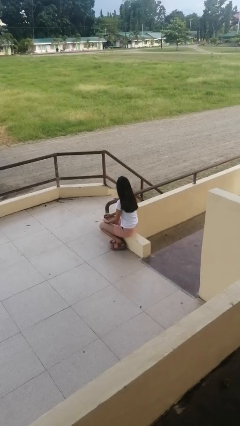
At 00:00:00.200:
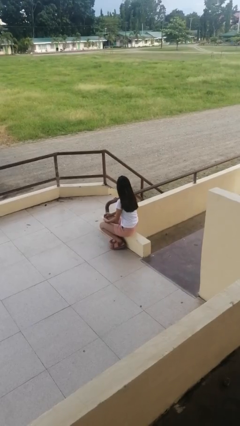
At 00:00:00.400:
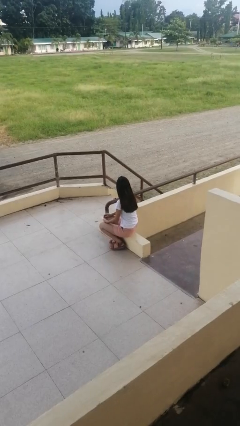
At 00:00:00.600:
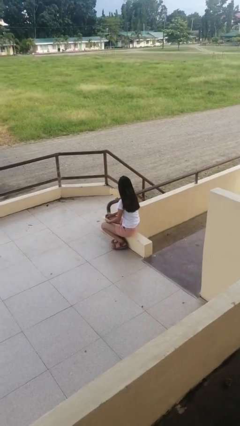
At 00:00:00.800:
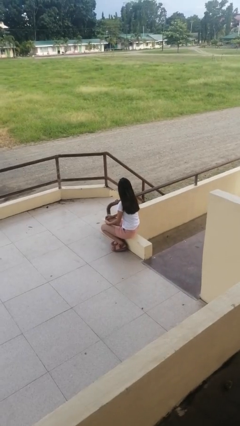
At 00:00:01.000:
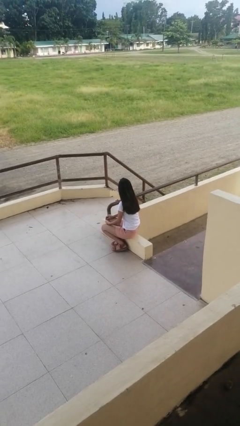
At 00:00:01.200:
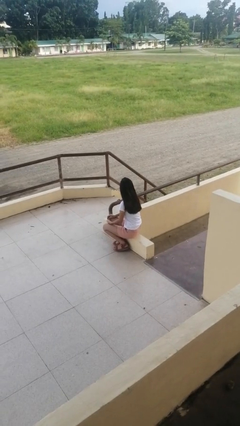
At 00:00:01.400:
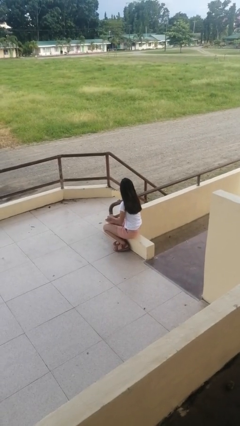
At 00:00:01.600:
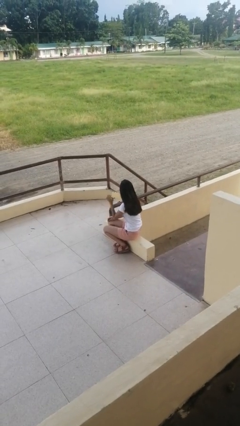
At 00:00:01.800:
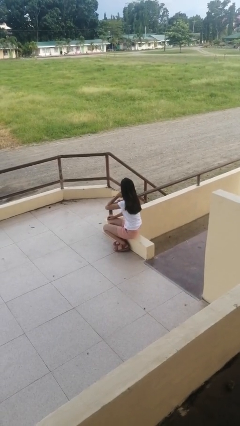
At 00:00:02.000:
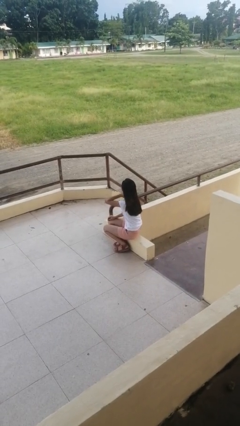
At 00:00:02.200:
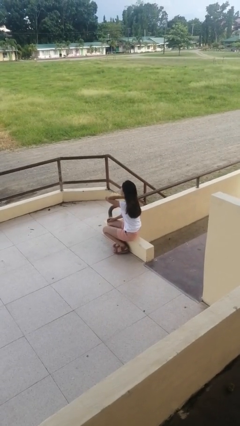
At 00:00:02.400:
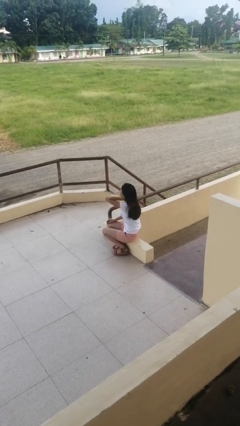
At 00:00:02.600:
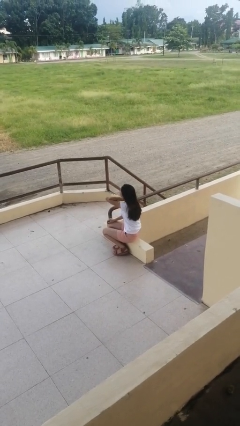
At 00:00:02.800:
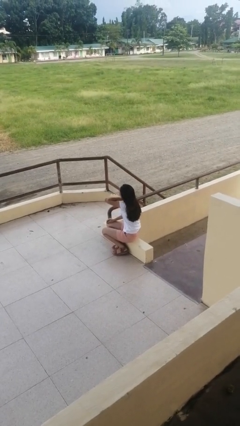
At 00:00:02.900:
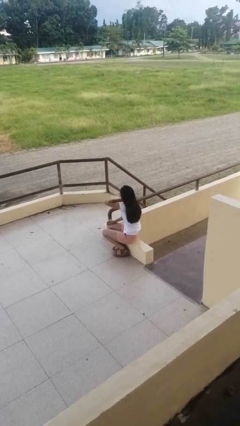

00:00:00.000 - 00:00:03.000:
person rubs neck

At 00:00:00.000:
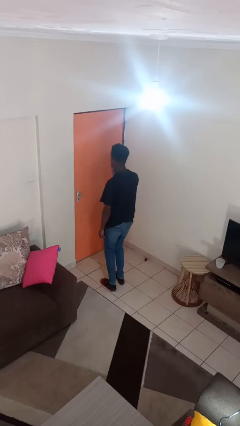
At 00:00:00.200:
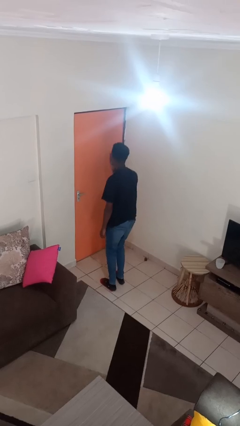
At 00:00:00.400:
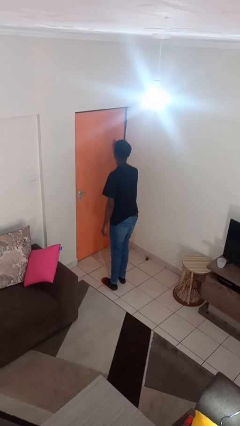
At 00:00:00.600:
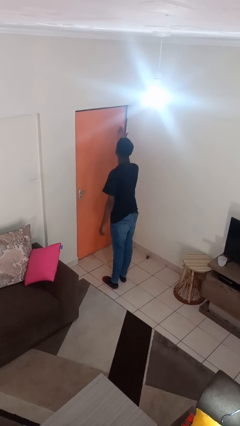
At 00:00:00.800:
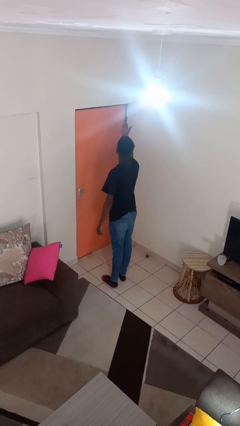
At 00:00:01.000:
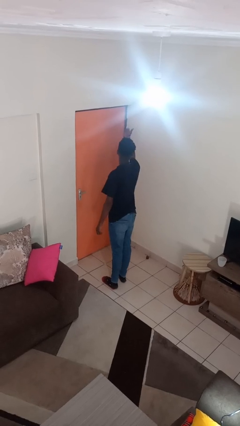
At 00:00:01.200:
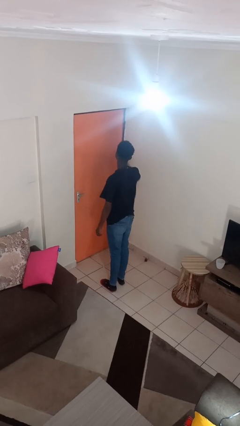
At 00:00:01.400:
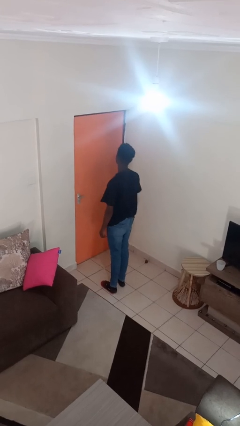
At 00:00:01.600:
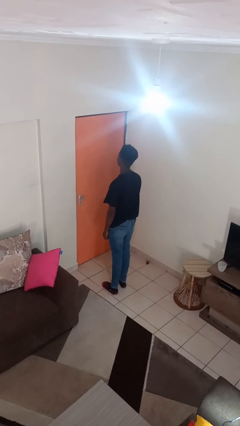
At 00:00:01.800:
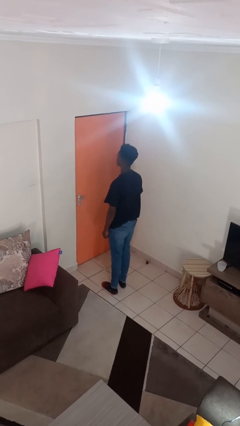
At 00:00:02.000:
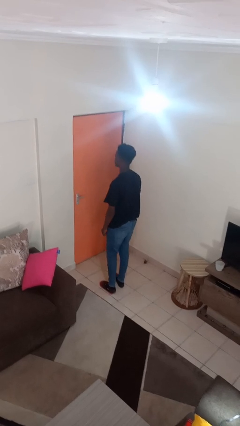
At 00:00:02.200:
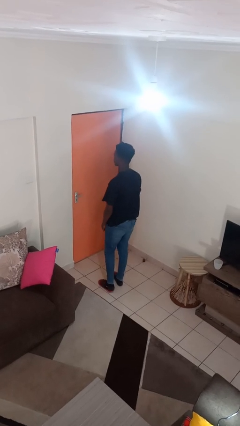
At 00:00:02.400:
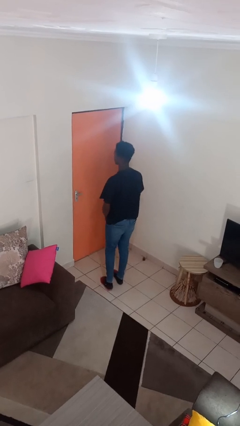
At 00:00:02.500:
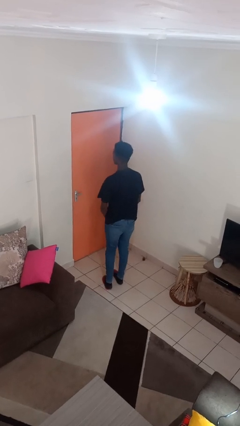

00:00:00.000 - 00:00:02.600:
person gestures blow kiss

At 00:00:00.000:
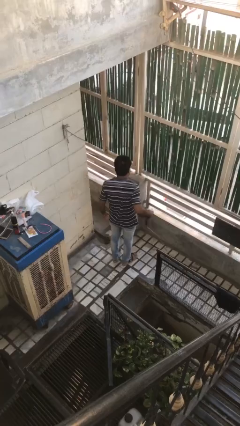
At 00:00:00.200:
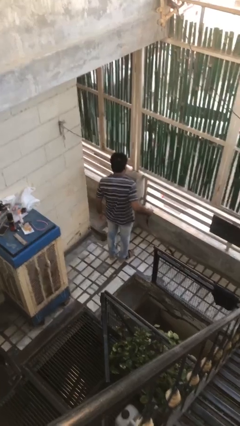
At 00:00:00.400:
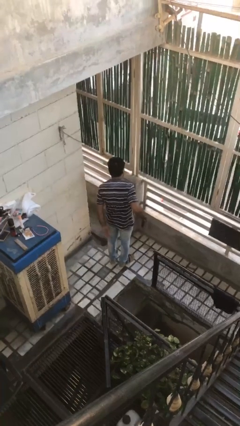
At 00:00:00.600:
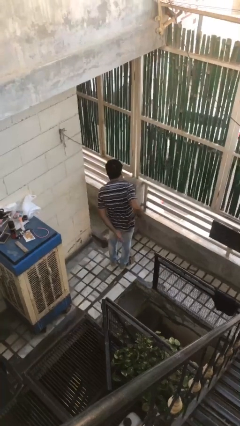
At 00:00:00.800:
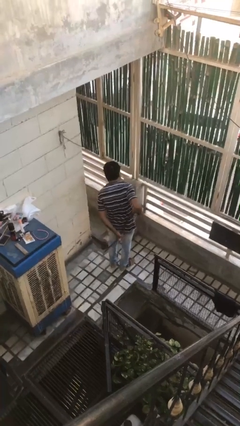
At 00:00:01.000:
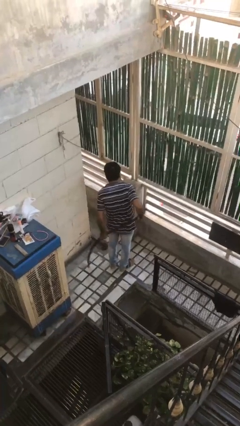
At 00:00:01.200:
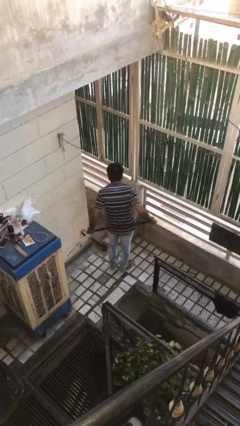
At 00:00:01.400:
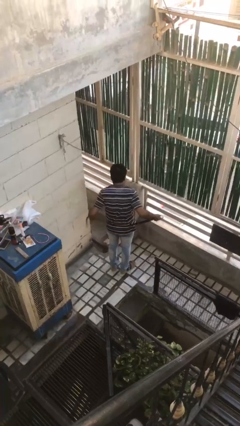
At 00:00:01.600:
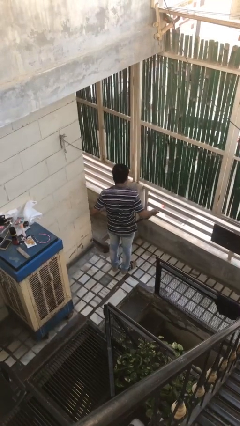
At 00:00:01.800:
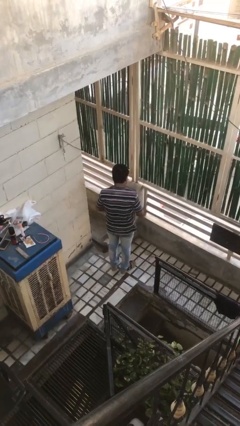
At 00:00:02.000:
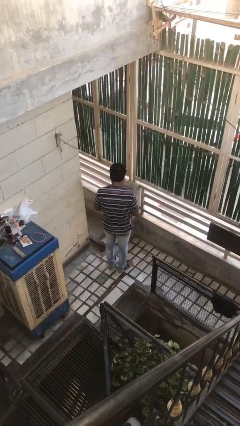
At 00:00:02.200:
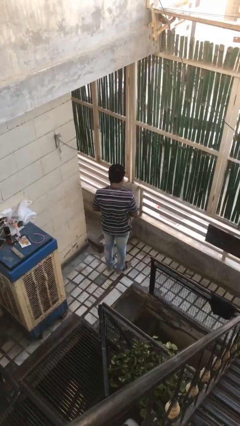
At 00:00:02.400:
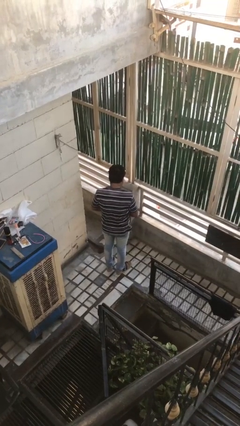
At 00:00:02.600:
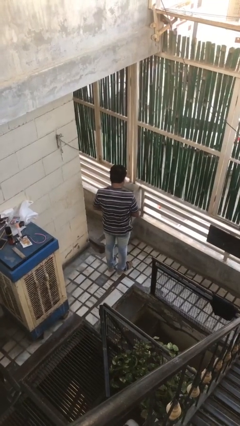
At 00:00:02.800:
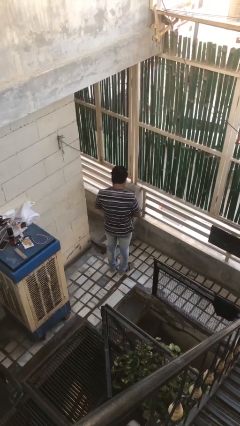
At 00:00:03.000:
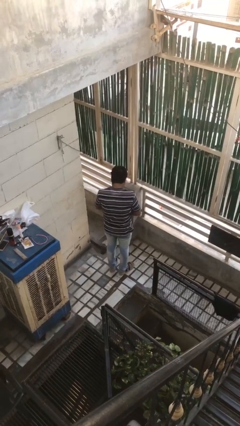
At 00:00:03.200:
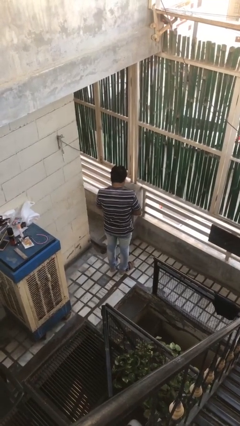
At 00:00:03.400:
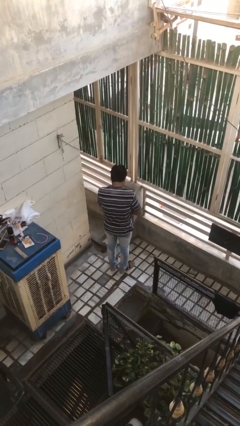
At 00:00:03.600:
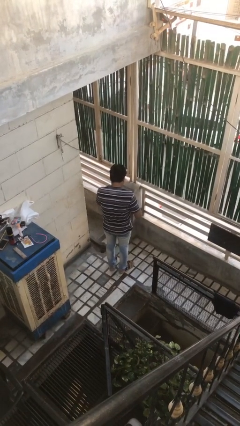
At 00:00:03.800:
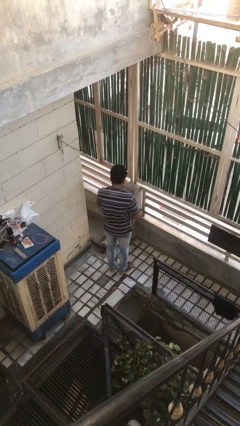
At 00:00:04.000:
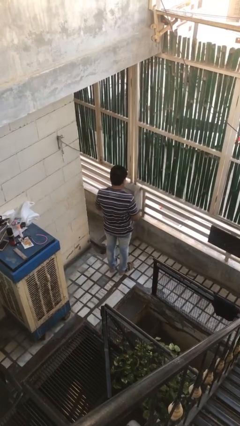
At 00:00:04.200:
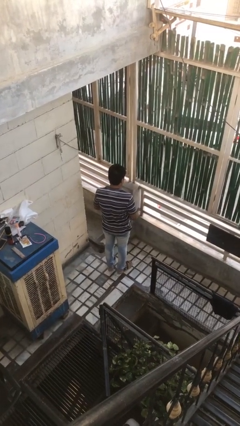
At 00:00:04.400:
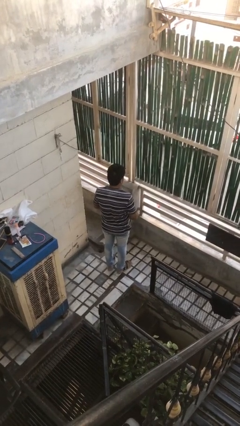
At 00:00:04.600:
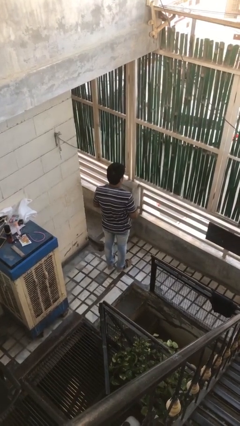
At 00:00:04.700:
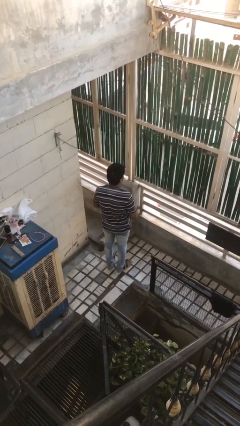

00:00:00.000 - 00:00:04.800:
person puts on belt

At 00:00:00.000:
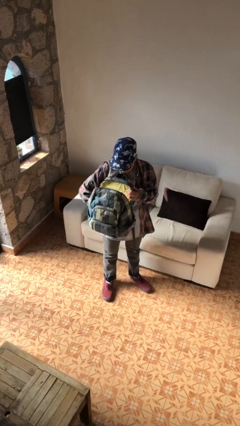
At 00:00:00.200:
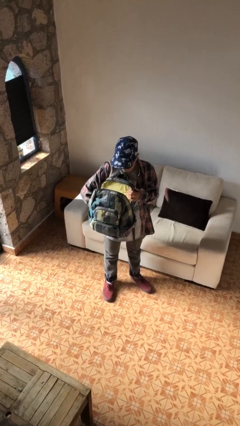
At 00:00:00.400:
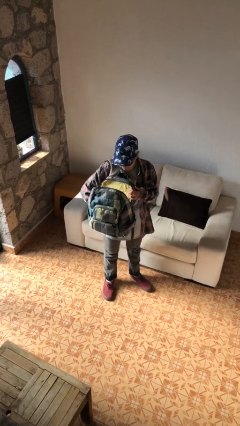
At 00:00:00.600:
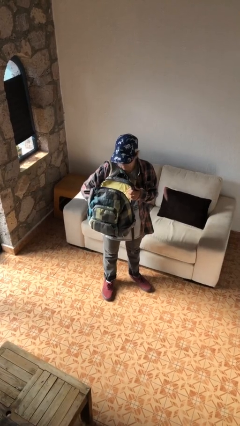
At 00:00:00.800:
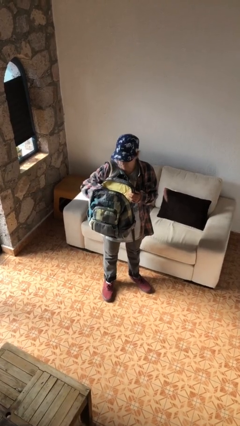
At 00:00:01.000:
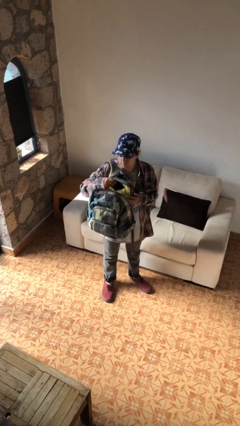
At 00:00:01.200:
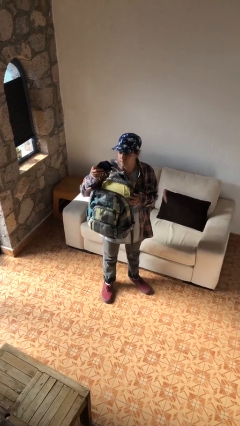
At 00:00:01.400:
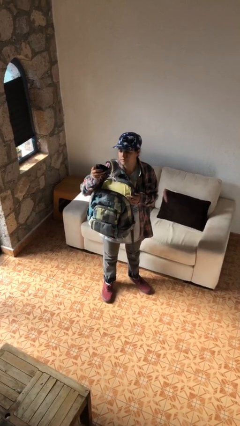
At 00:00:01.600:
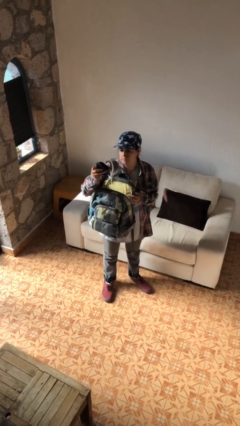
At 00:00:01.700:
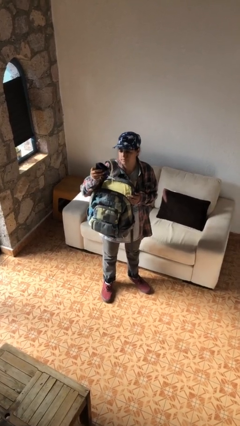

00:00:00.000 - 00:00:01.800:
person takes object from backpack

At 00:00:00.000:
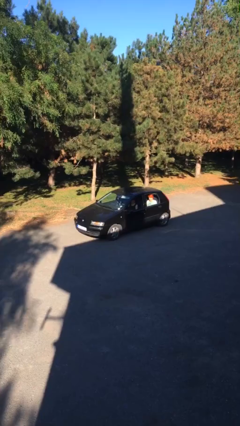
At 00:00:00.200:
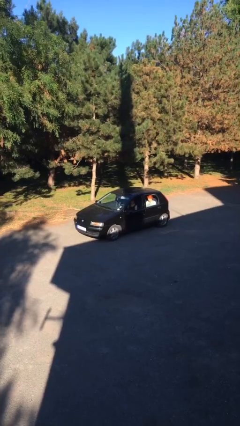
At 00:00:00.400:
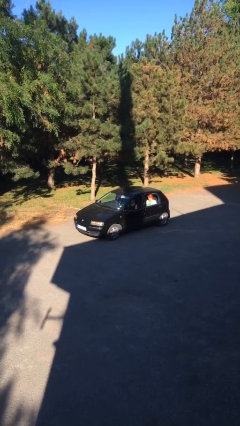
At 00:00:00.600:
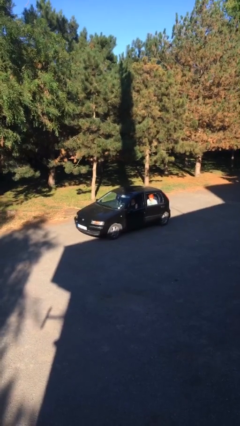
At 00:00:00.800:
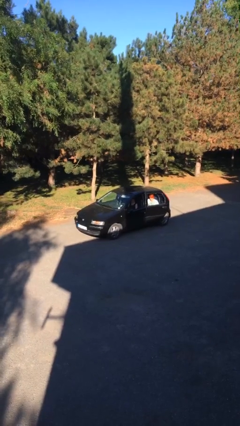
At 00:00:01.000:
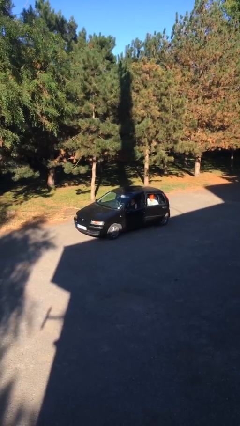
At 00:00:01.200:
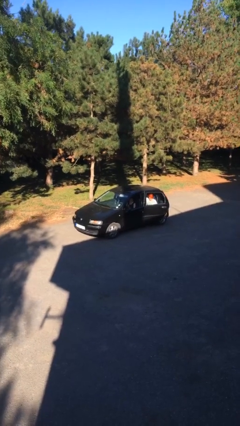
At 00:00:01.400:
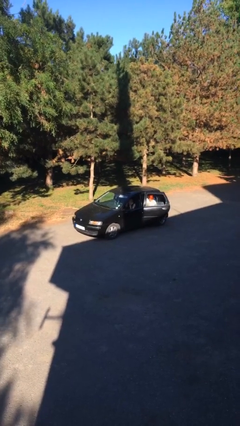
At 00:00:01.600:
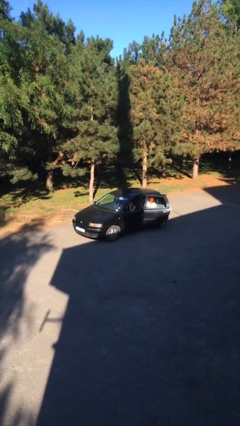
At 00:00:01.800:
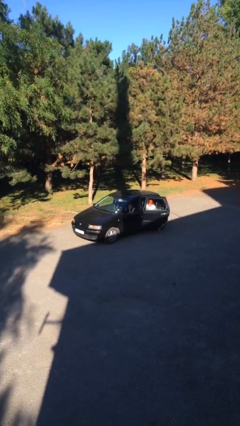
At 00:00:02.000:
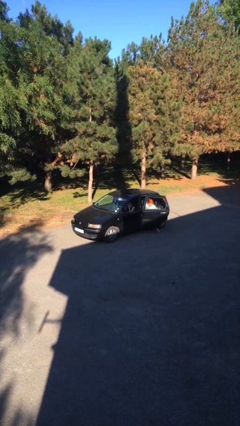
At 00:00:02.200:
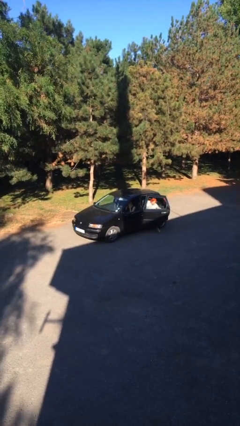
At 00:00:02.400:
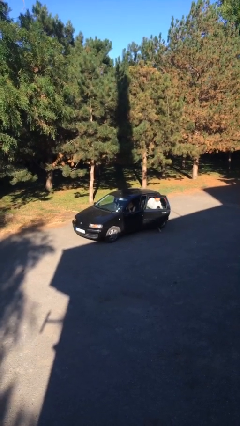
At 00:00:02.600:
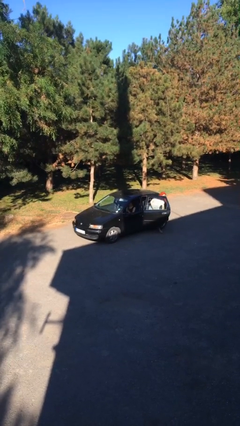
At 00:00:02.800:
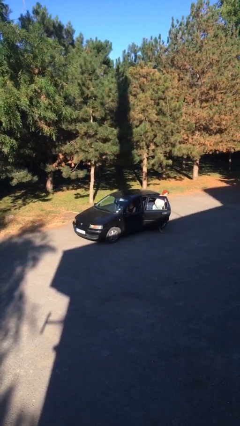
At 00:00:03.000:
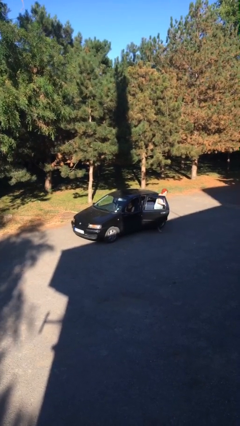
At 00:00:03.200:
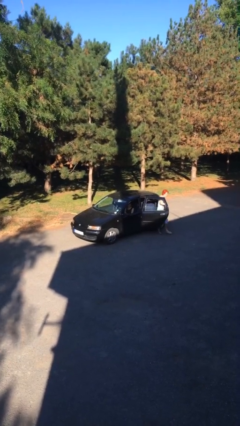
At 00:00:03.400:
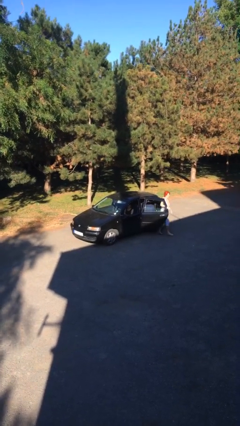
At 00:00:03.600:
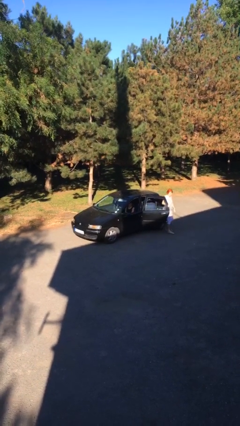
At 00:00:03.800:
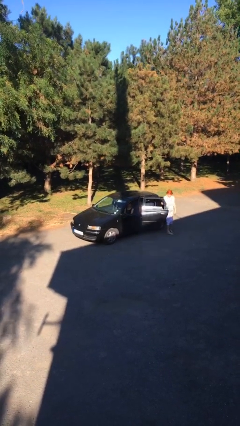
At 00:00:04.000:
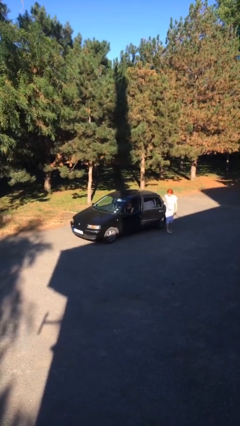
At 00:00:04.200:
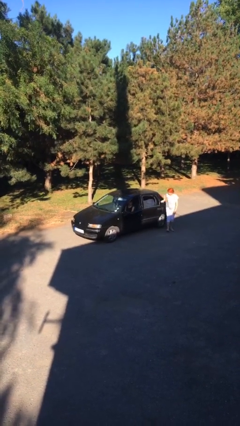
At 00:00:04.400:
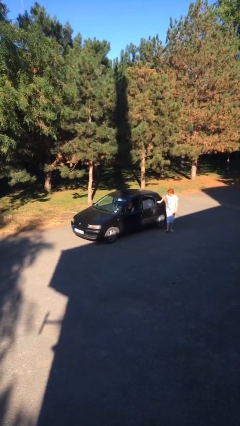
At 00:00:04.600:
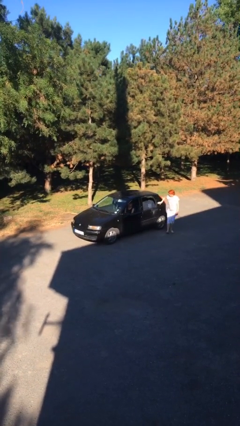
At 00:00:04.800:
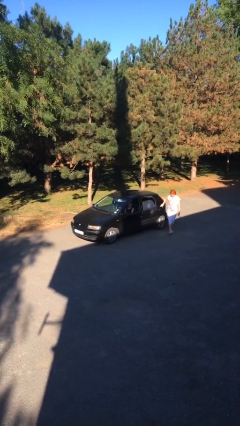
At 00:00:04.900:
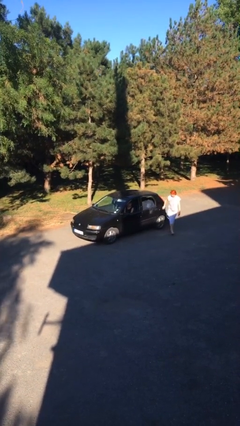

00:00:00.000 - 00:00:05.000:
car drops off person

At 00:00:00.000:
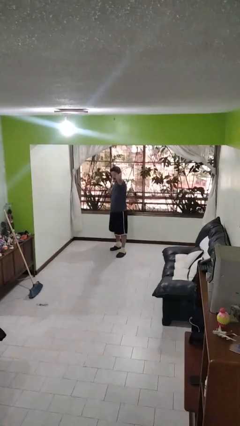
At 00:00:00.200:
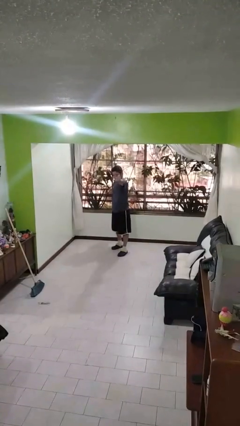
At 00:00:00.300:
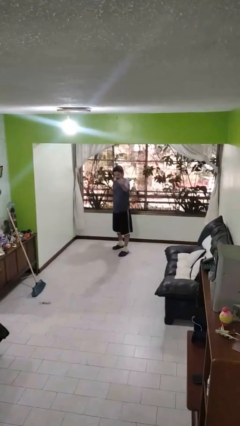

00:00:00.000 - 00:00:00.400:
person punches
